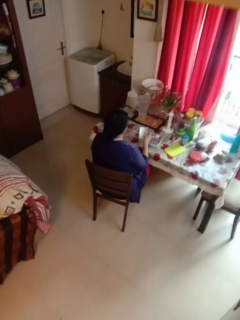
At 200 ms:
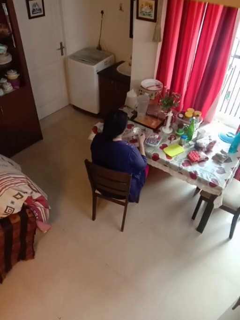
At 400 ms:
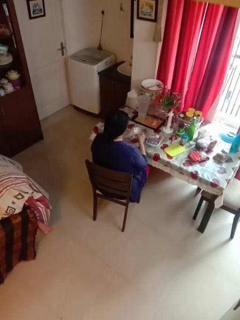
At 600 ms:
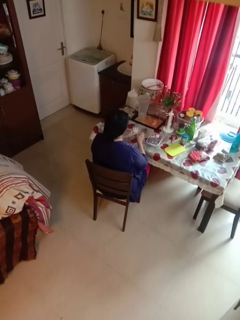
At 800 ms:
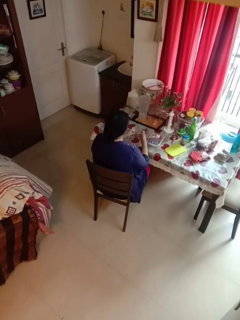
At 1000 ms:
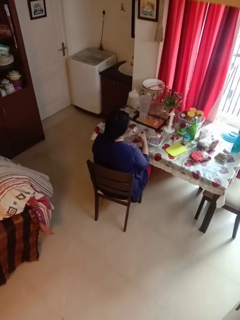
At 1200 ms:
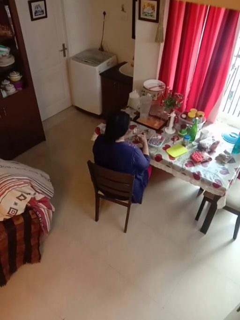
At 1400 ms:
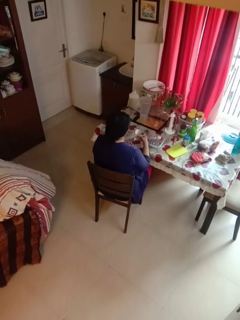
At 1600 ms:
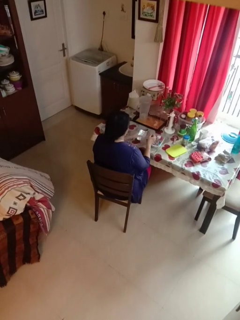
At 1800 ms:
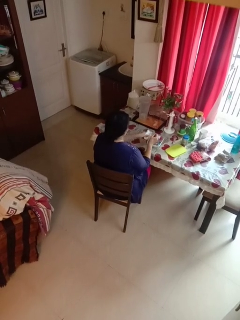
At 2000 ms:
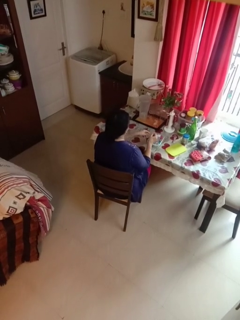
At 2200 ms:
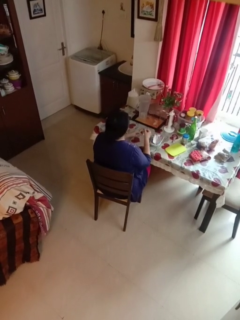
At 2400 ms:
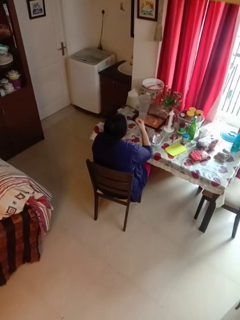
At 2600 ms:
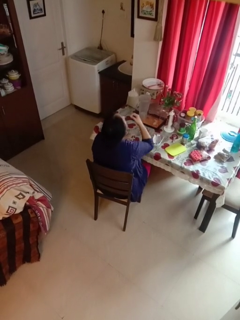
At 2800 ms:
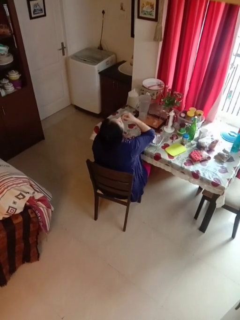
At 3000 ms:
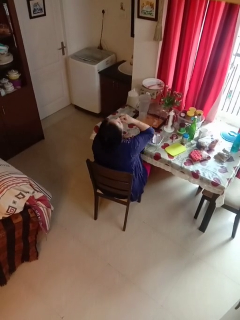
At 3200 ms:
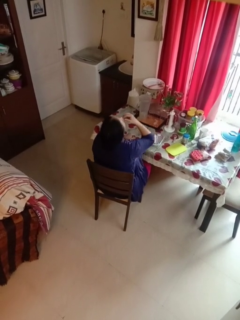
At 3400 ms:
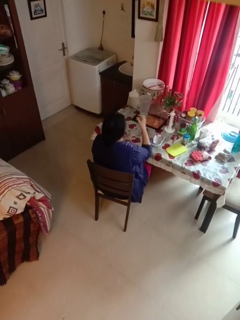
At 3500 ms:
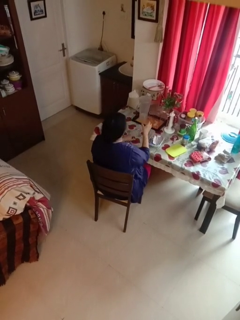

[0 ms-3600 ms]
person takes medicine pills

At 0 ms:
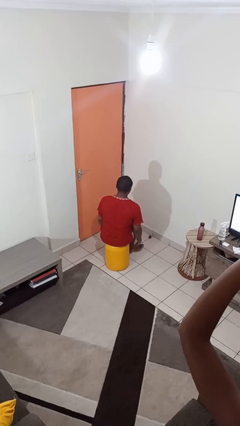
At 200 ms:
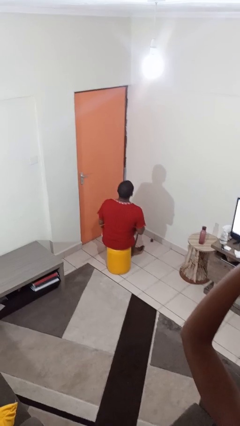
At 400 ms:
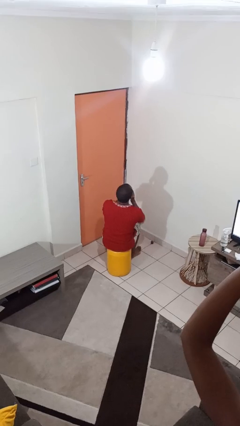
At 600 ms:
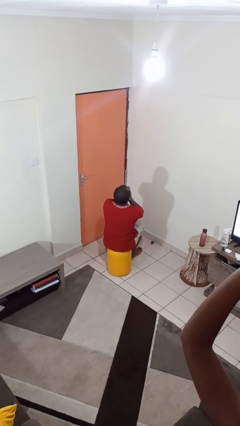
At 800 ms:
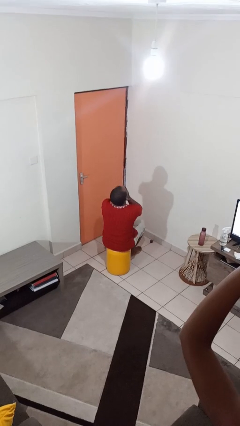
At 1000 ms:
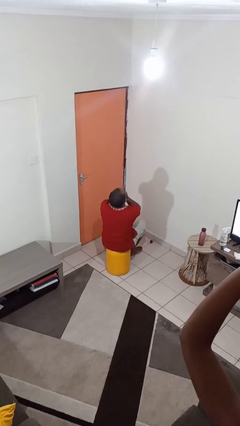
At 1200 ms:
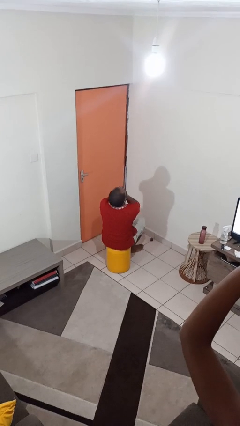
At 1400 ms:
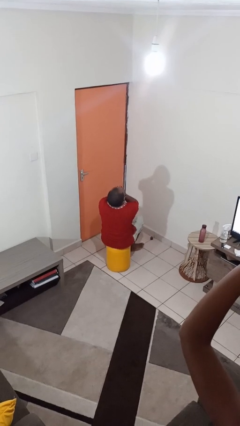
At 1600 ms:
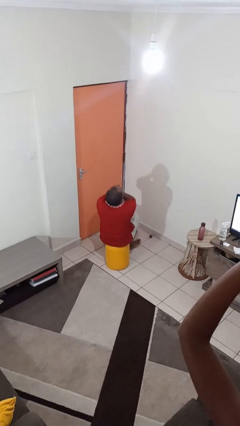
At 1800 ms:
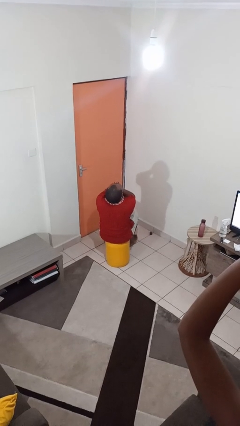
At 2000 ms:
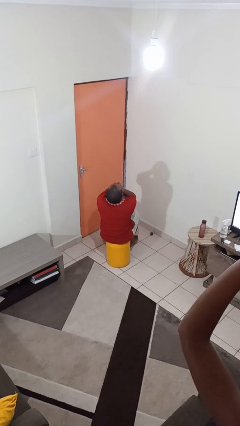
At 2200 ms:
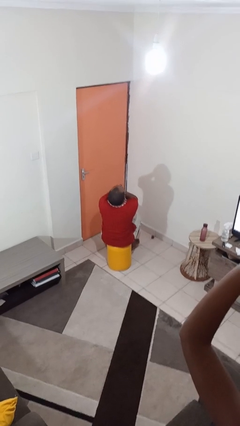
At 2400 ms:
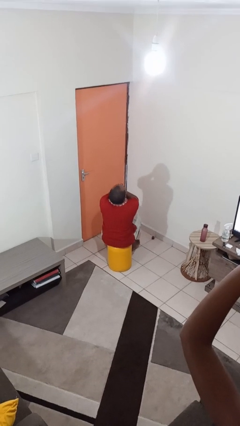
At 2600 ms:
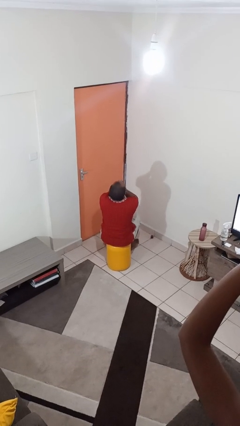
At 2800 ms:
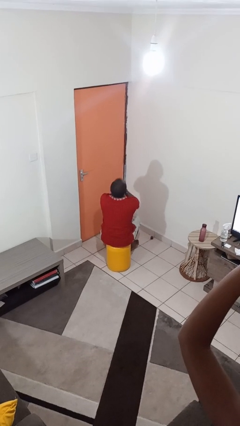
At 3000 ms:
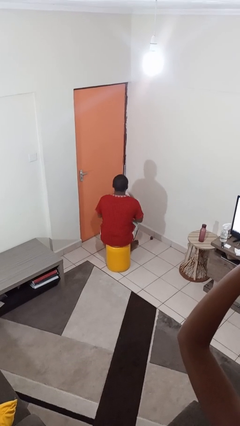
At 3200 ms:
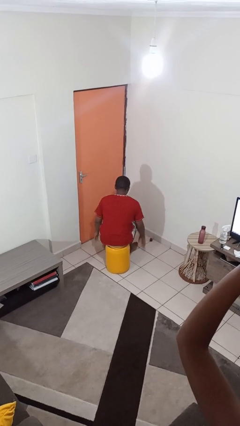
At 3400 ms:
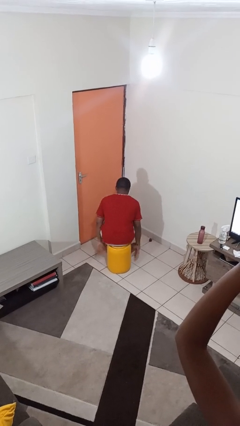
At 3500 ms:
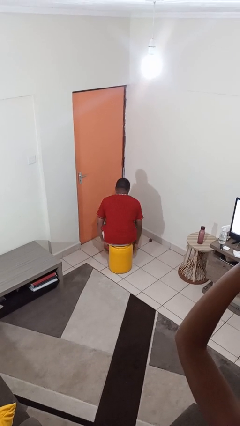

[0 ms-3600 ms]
person yawns

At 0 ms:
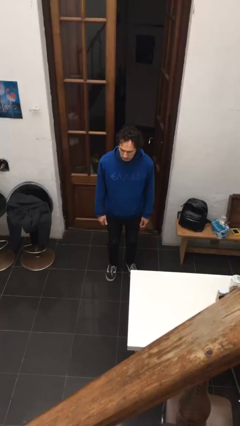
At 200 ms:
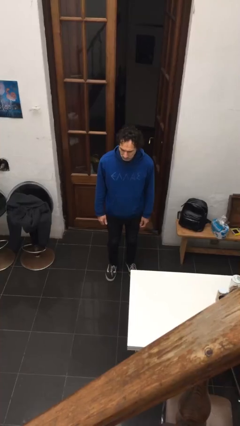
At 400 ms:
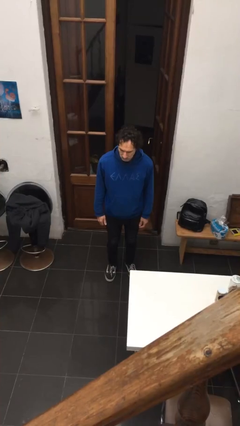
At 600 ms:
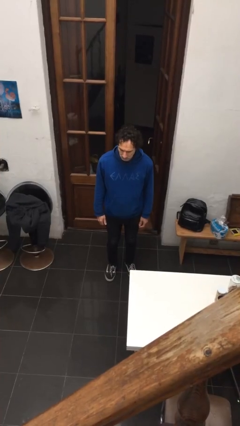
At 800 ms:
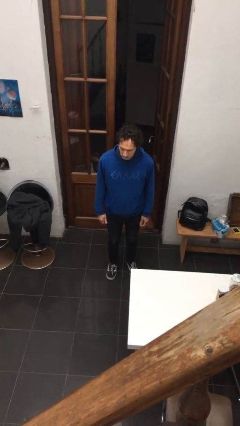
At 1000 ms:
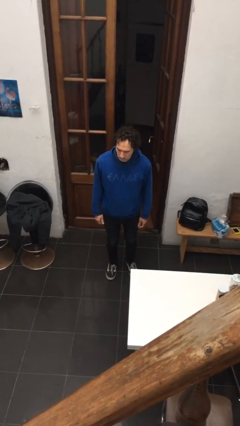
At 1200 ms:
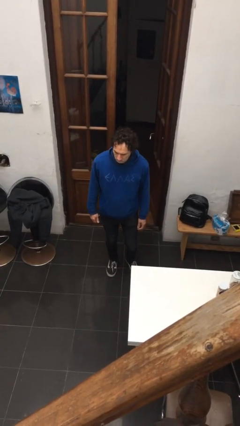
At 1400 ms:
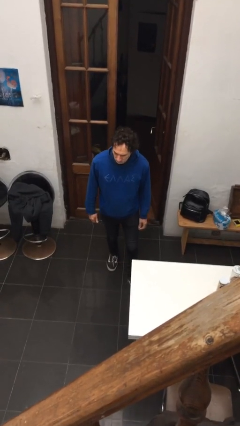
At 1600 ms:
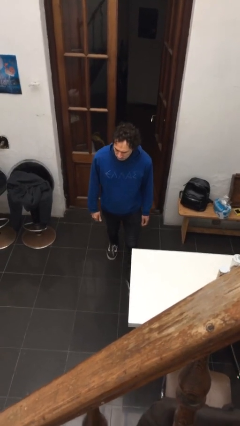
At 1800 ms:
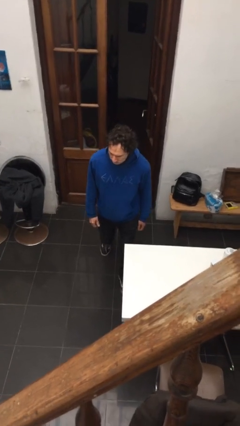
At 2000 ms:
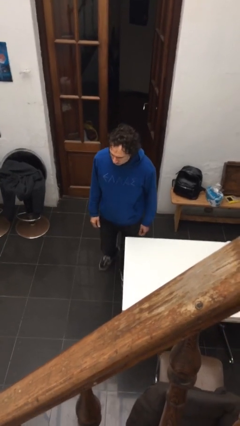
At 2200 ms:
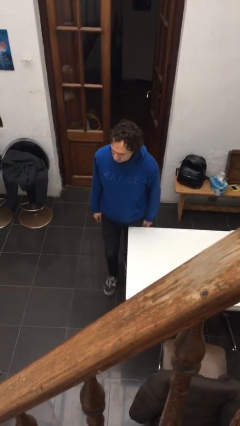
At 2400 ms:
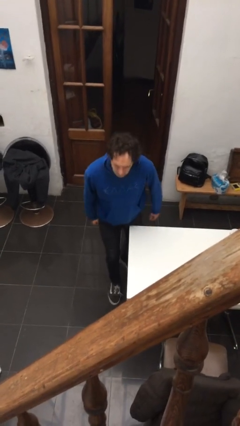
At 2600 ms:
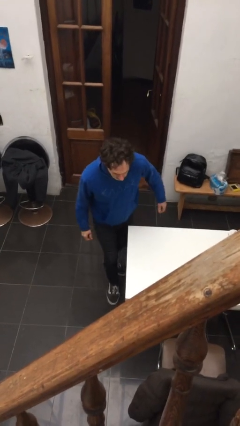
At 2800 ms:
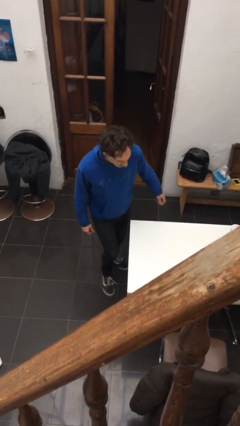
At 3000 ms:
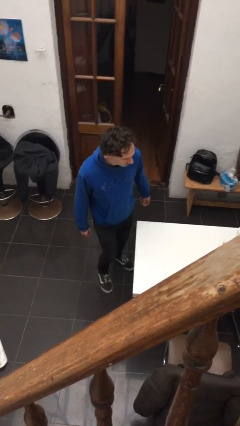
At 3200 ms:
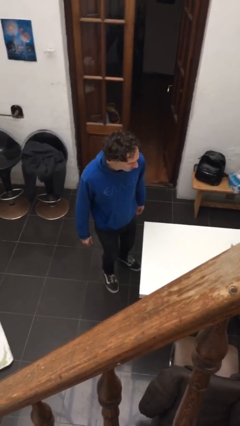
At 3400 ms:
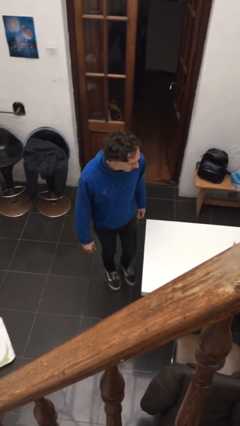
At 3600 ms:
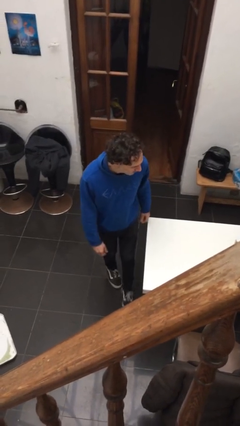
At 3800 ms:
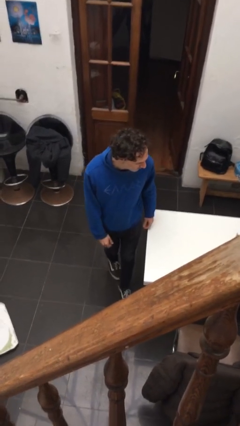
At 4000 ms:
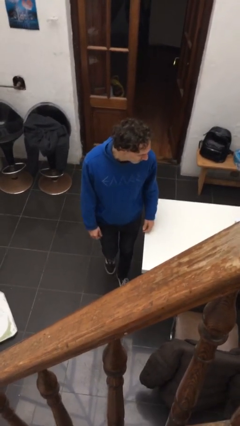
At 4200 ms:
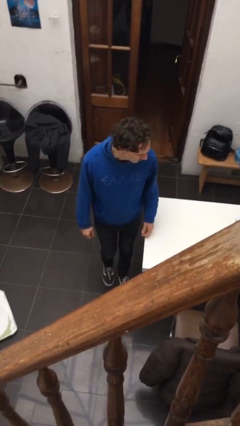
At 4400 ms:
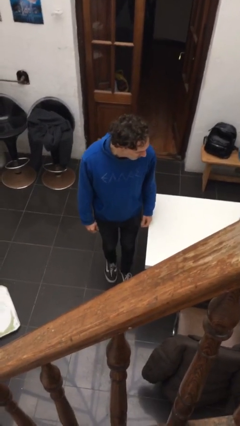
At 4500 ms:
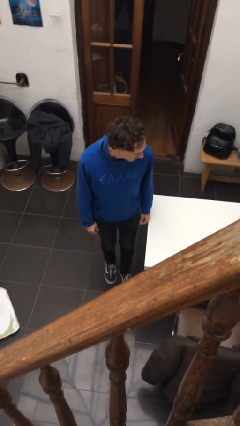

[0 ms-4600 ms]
person bumps into table

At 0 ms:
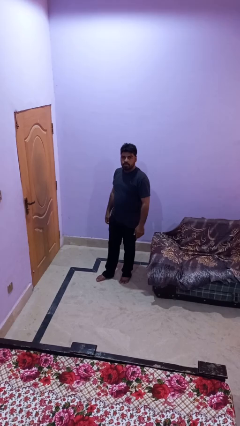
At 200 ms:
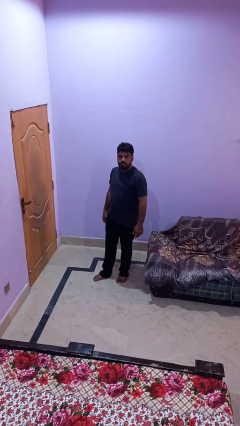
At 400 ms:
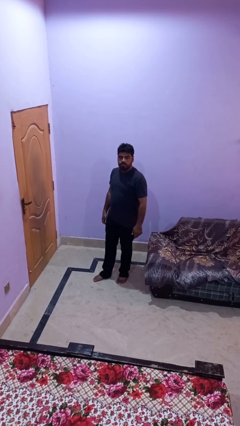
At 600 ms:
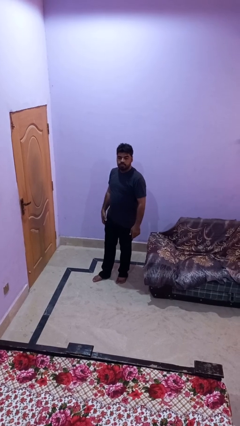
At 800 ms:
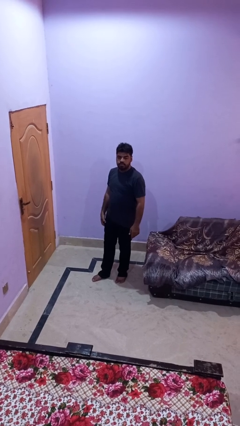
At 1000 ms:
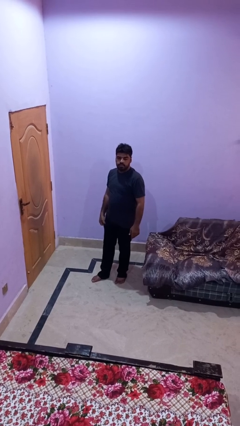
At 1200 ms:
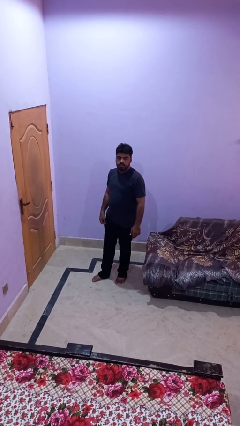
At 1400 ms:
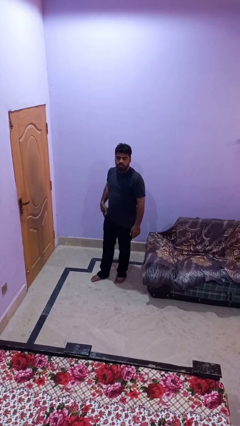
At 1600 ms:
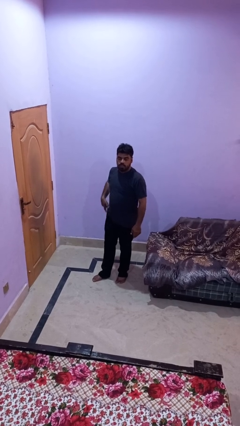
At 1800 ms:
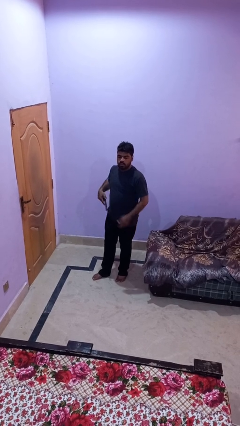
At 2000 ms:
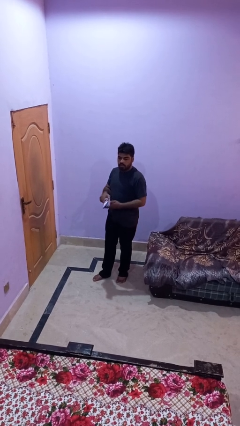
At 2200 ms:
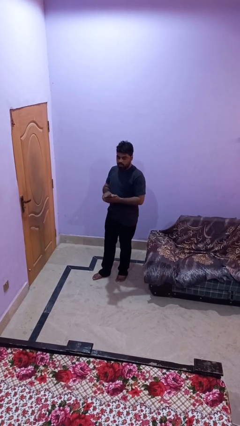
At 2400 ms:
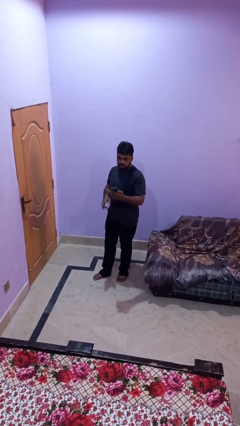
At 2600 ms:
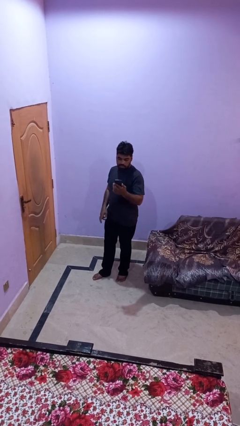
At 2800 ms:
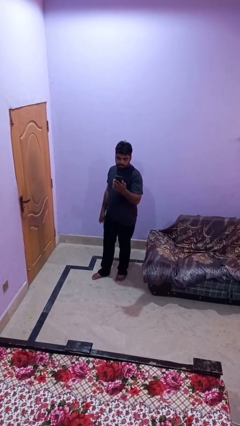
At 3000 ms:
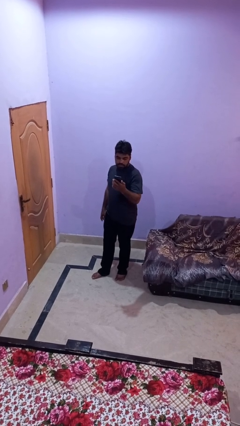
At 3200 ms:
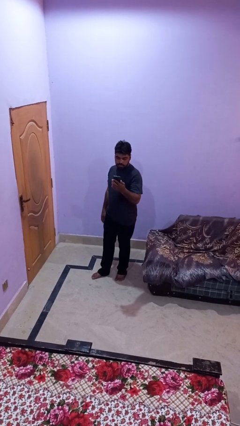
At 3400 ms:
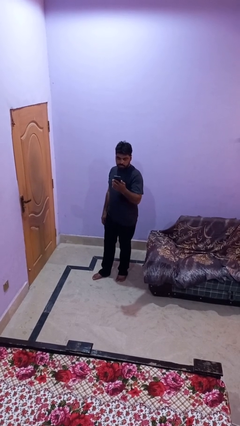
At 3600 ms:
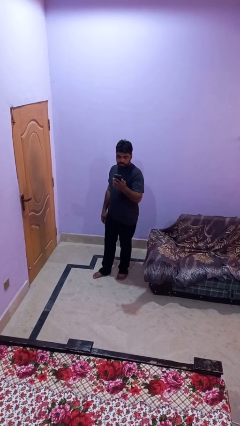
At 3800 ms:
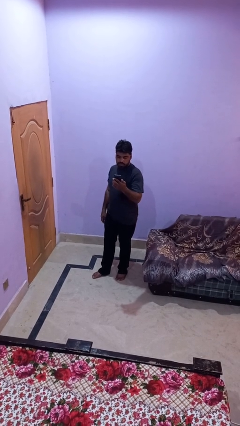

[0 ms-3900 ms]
person takes phone from pocket

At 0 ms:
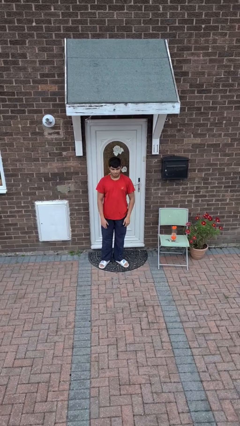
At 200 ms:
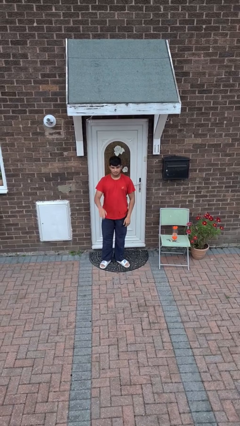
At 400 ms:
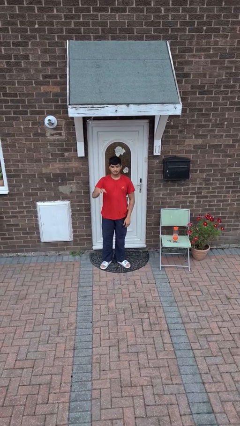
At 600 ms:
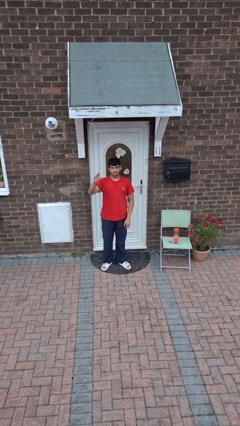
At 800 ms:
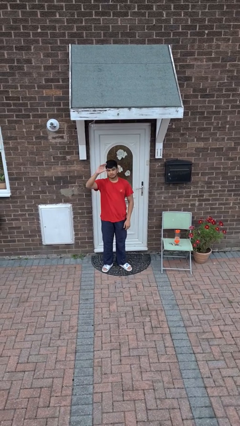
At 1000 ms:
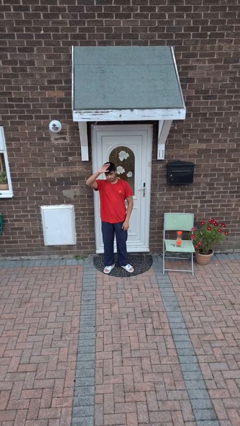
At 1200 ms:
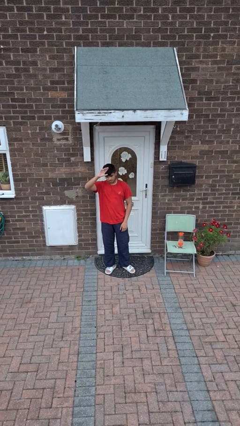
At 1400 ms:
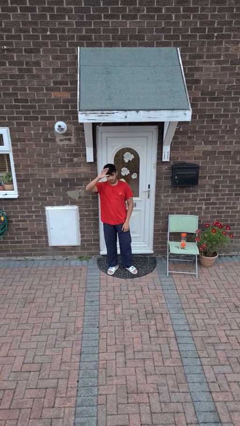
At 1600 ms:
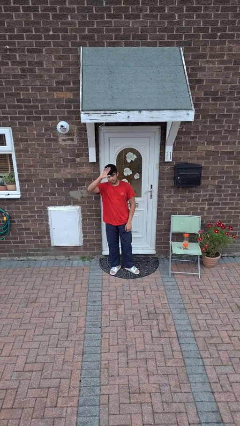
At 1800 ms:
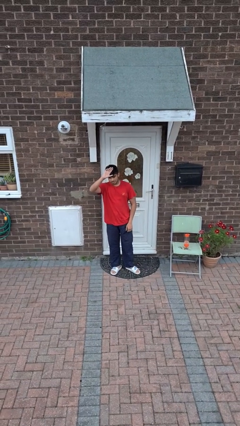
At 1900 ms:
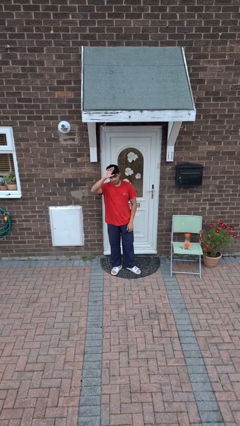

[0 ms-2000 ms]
person gestures raise hand

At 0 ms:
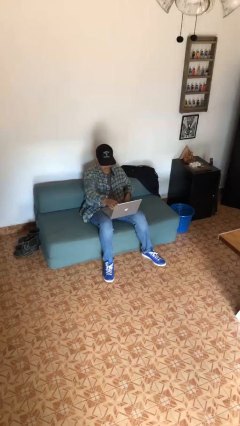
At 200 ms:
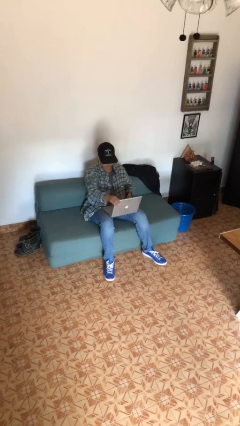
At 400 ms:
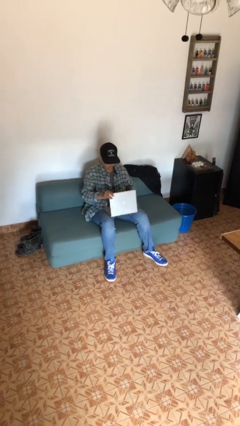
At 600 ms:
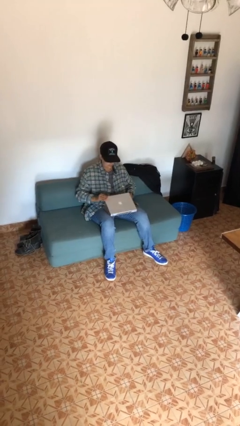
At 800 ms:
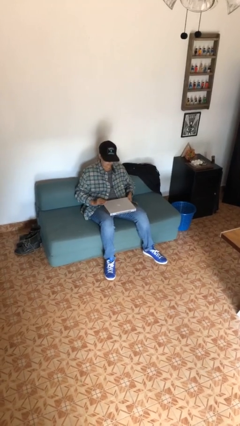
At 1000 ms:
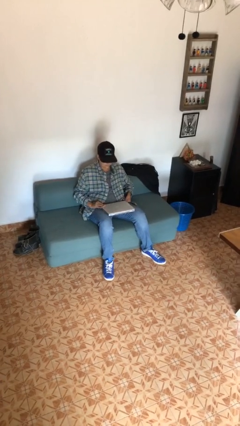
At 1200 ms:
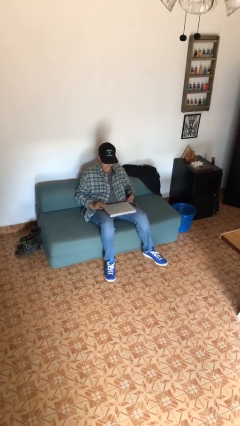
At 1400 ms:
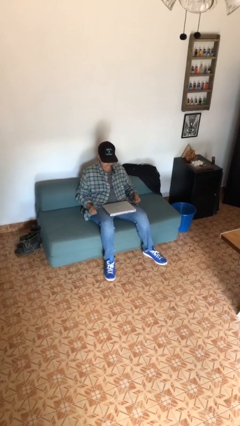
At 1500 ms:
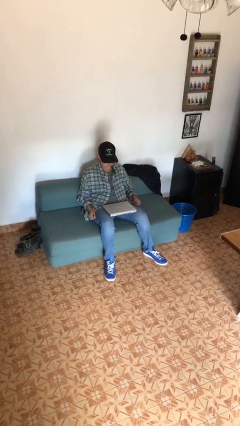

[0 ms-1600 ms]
person closes laptop
